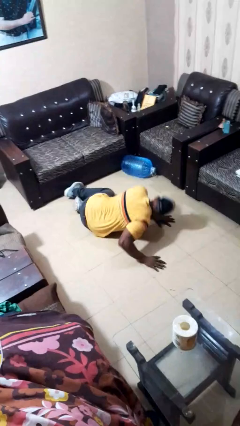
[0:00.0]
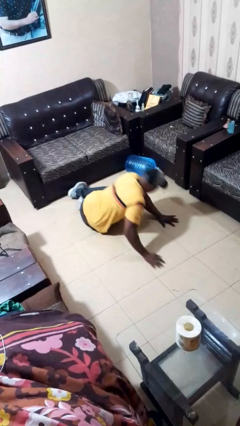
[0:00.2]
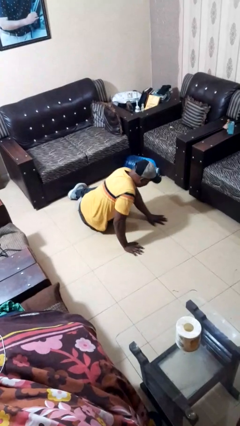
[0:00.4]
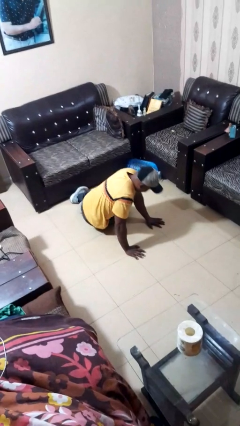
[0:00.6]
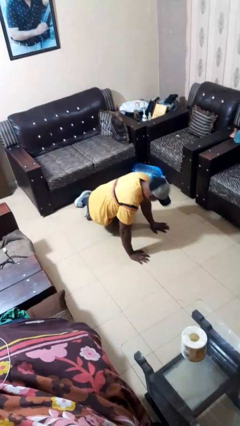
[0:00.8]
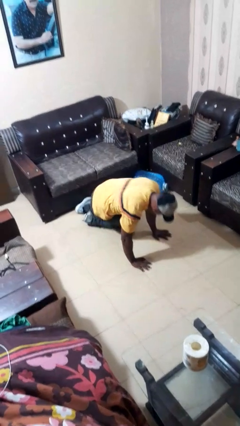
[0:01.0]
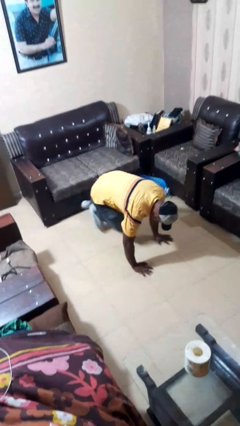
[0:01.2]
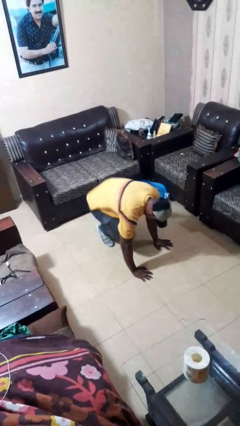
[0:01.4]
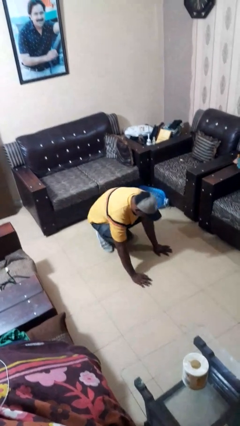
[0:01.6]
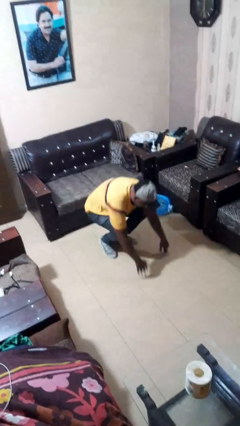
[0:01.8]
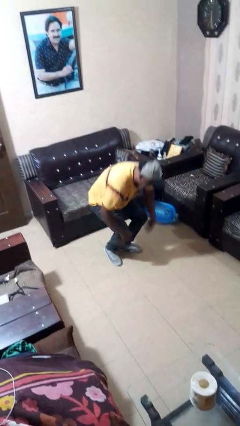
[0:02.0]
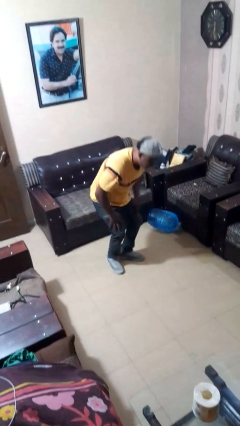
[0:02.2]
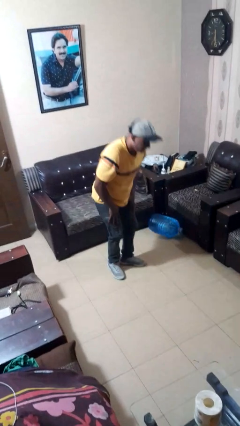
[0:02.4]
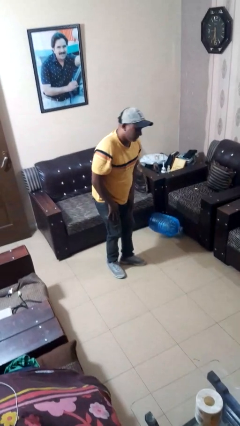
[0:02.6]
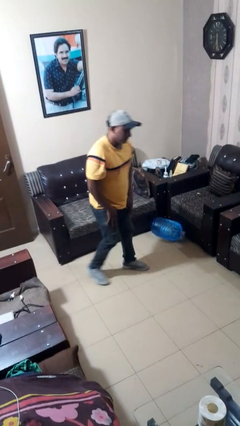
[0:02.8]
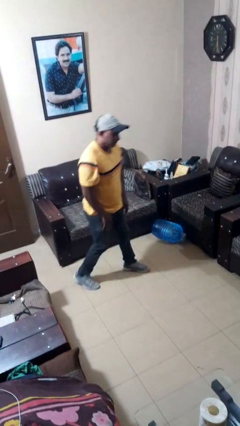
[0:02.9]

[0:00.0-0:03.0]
person stands up from floor

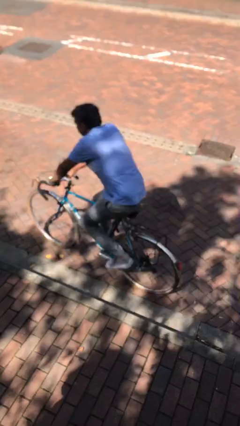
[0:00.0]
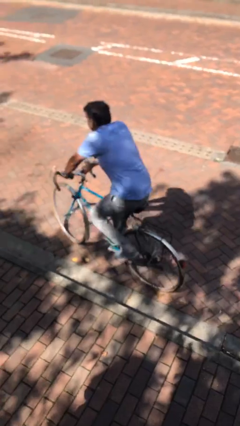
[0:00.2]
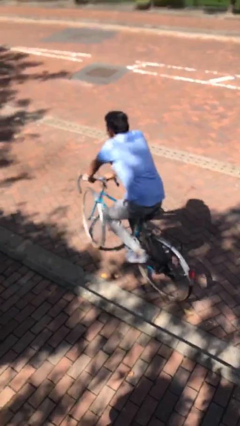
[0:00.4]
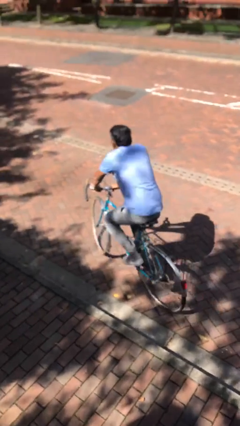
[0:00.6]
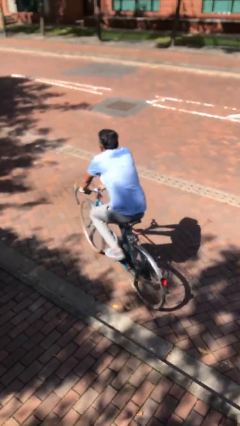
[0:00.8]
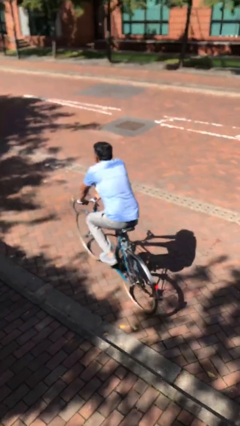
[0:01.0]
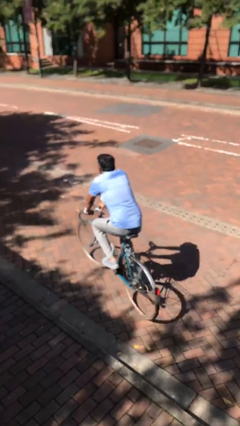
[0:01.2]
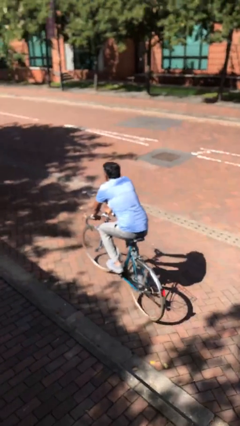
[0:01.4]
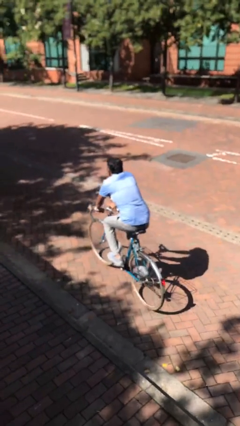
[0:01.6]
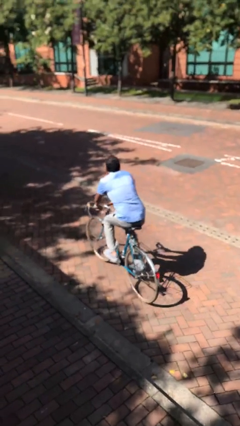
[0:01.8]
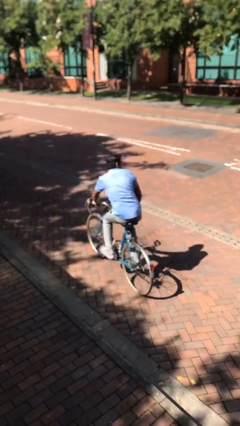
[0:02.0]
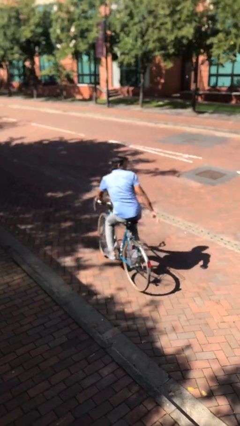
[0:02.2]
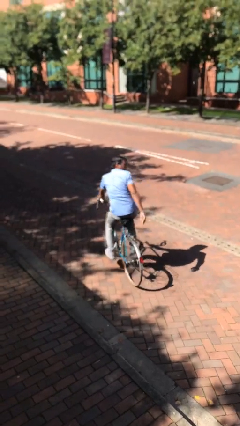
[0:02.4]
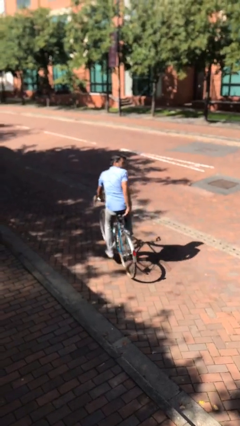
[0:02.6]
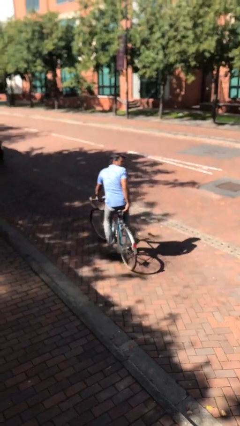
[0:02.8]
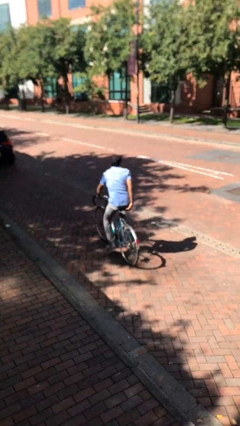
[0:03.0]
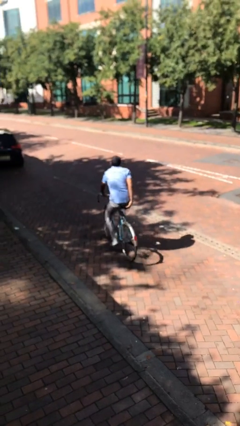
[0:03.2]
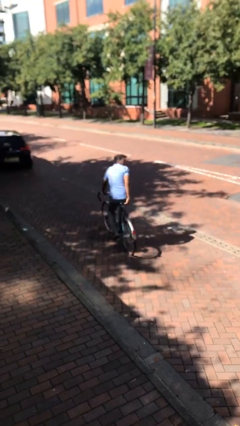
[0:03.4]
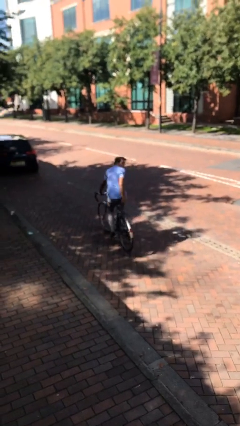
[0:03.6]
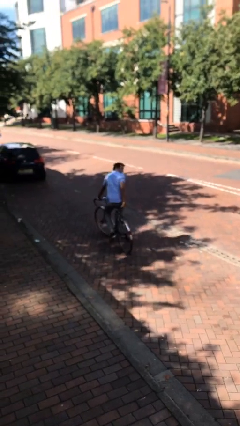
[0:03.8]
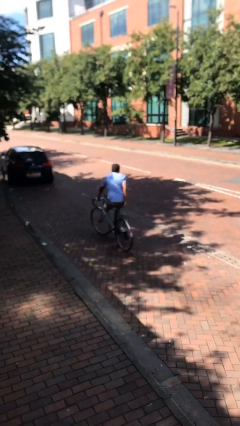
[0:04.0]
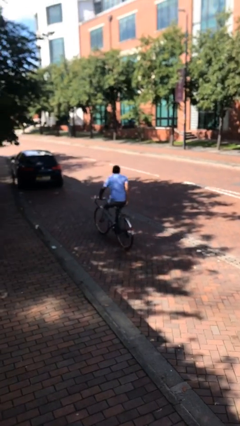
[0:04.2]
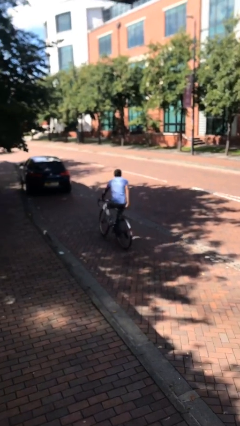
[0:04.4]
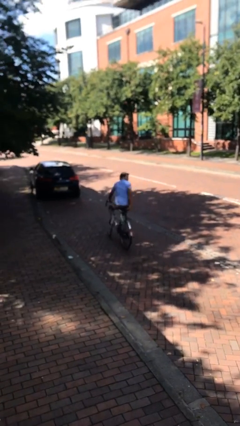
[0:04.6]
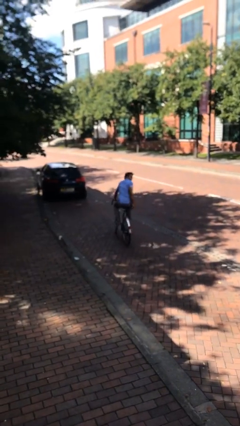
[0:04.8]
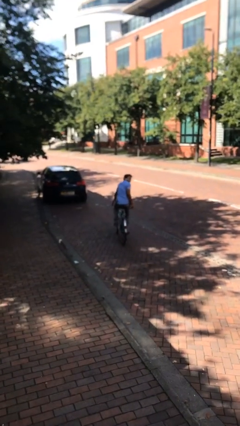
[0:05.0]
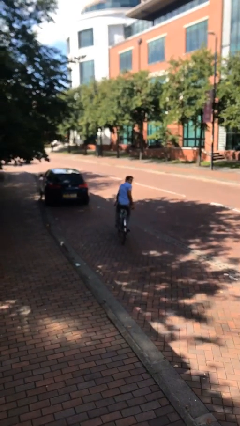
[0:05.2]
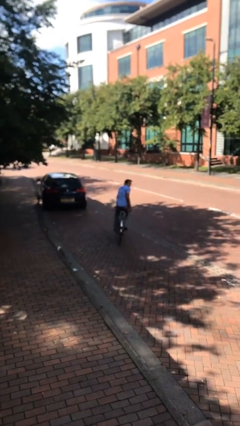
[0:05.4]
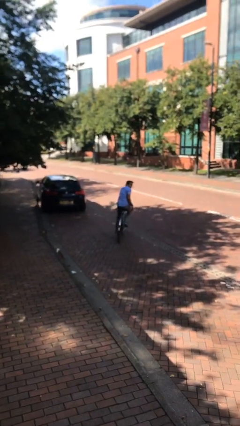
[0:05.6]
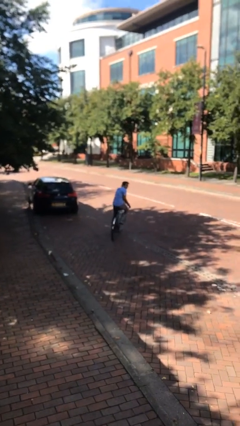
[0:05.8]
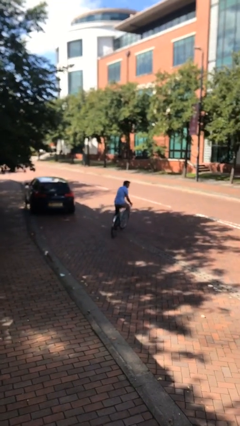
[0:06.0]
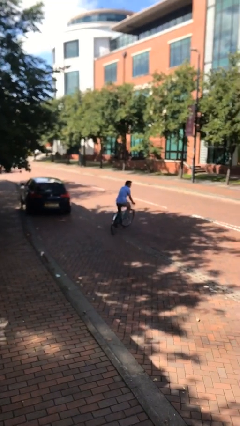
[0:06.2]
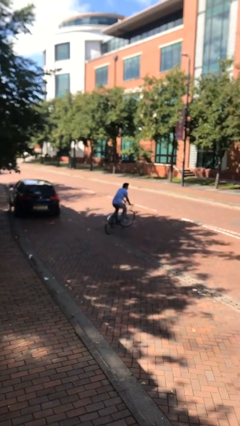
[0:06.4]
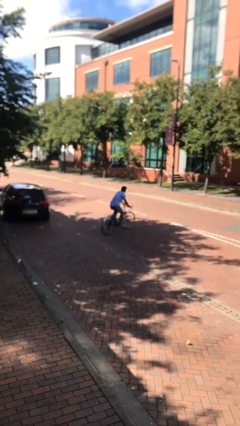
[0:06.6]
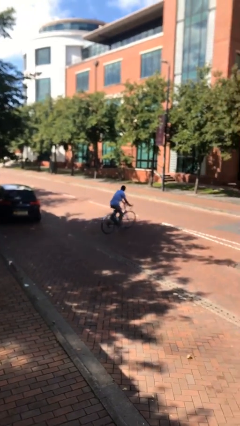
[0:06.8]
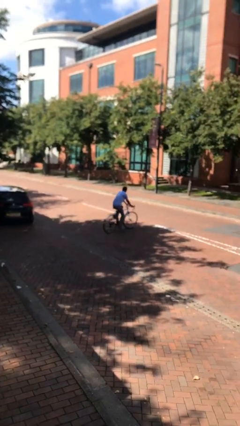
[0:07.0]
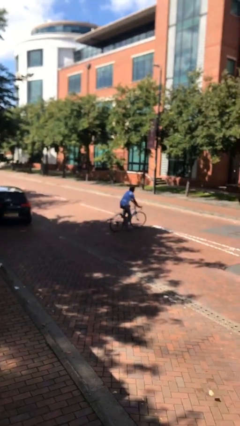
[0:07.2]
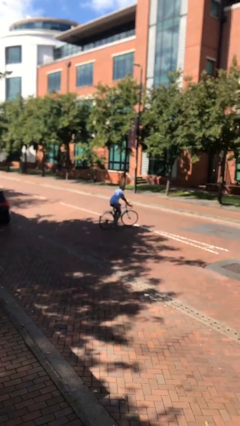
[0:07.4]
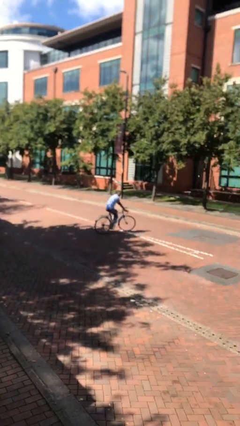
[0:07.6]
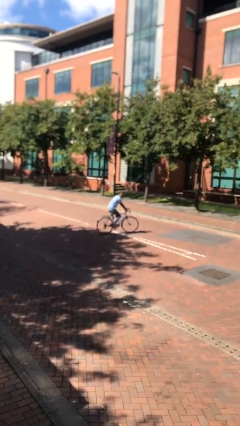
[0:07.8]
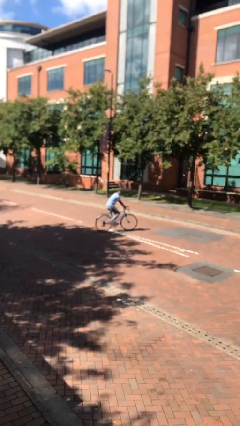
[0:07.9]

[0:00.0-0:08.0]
person rides bicycle

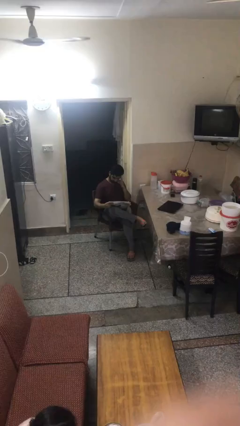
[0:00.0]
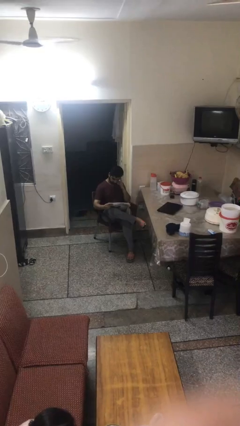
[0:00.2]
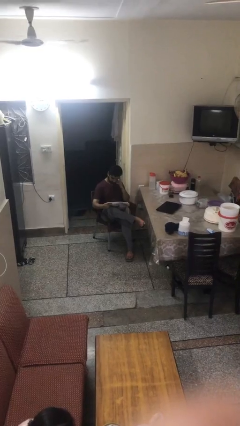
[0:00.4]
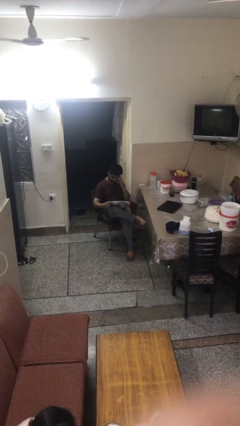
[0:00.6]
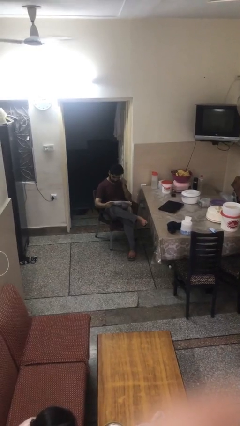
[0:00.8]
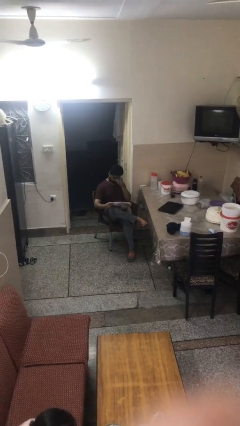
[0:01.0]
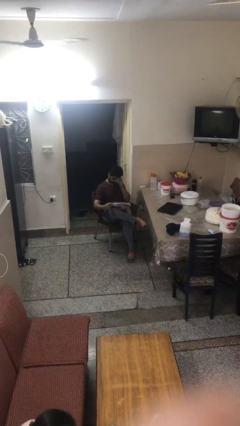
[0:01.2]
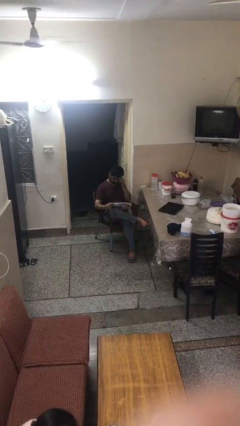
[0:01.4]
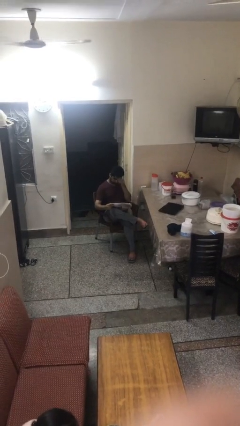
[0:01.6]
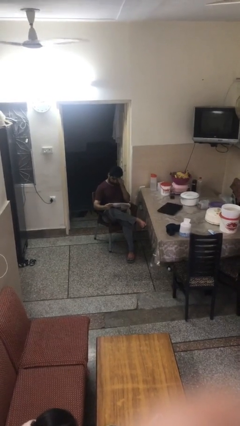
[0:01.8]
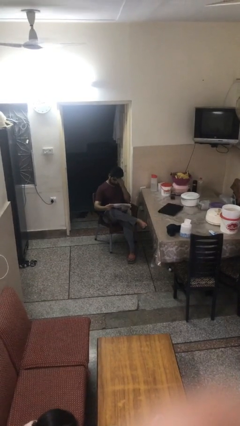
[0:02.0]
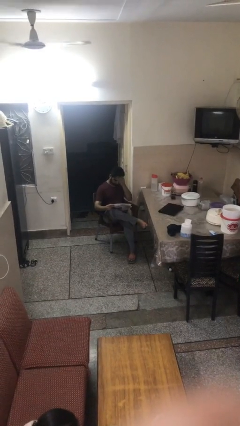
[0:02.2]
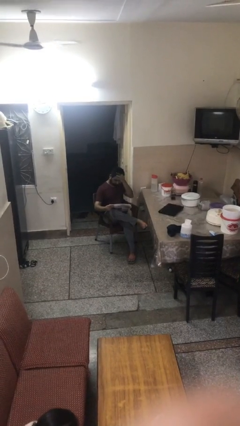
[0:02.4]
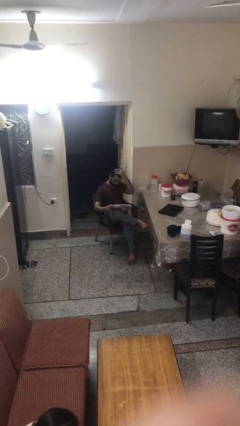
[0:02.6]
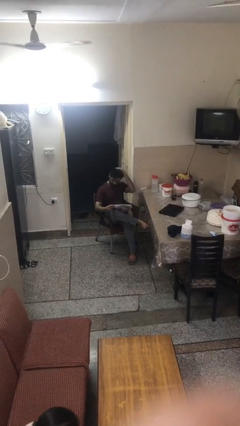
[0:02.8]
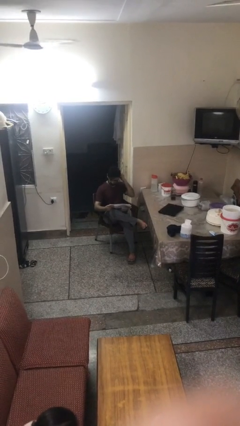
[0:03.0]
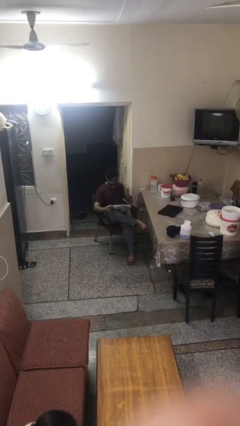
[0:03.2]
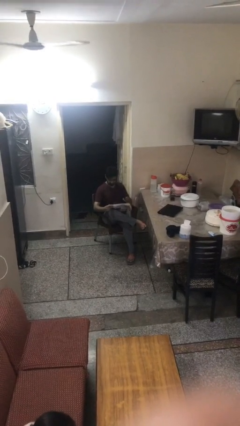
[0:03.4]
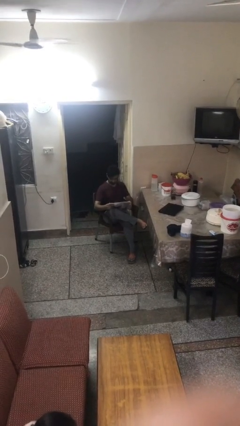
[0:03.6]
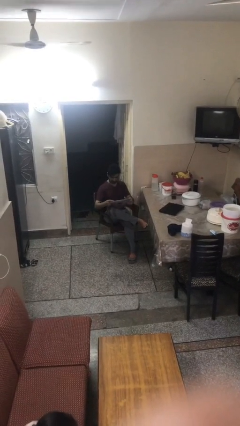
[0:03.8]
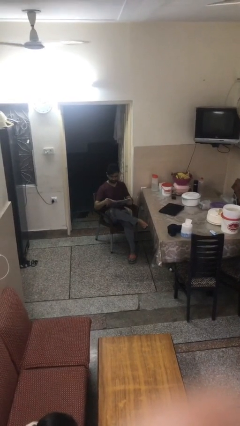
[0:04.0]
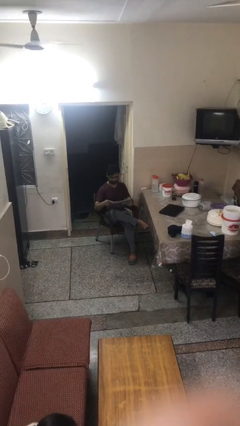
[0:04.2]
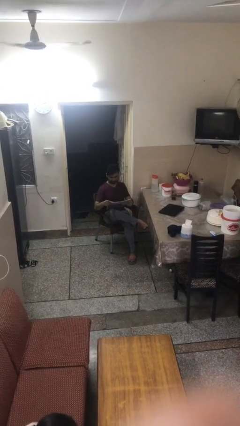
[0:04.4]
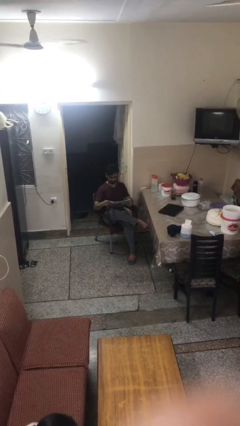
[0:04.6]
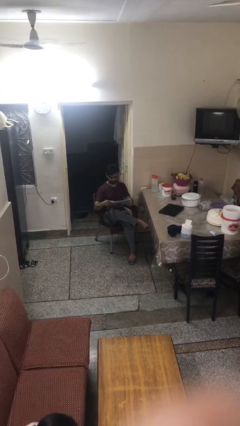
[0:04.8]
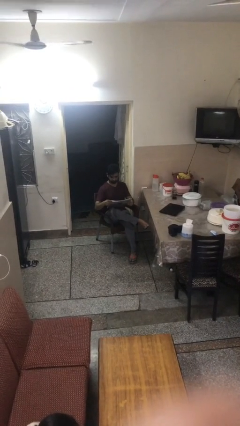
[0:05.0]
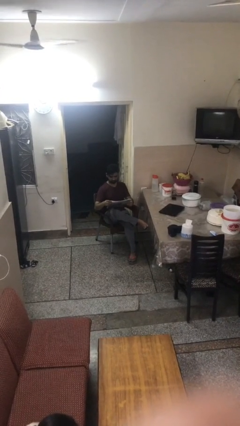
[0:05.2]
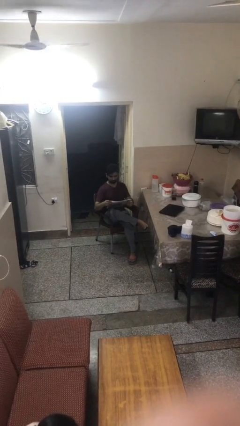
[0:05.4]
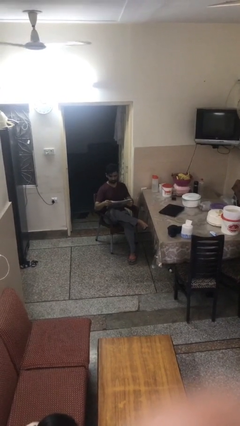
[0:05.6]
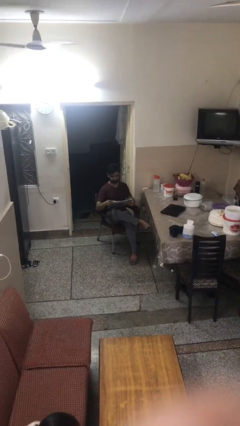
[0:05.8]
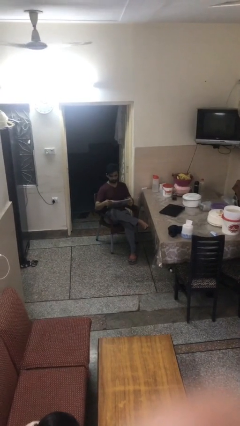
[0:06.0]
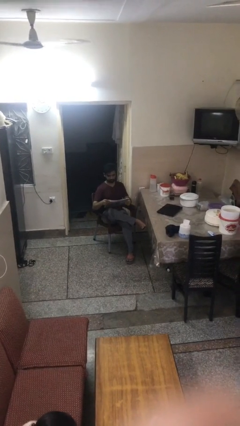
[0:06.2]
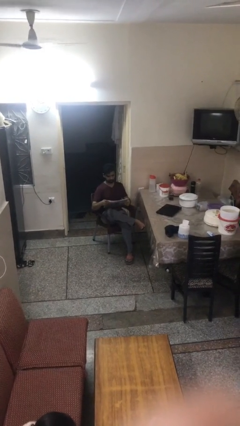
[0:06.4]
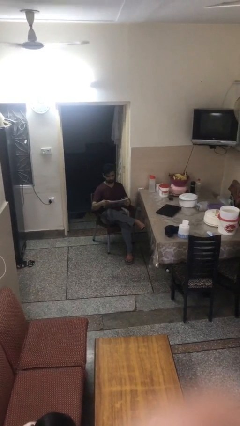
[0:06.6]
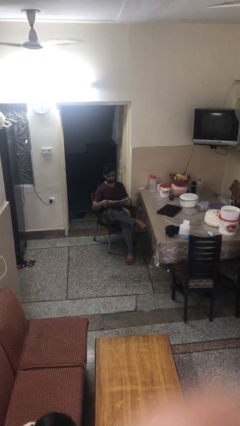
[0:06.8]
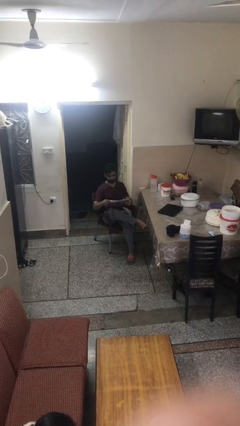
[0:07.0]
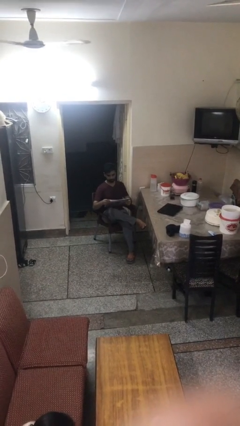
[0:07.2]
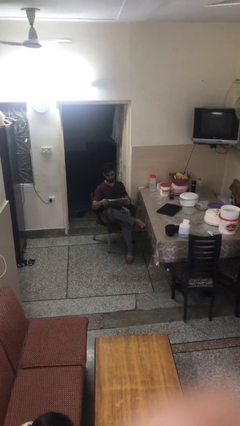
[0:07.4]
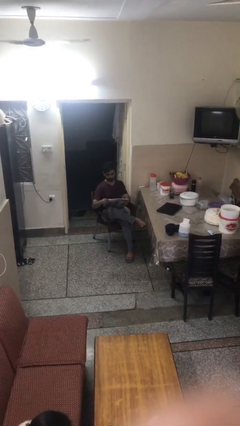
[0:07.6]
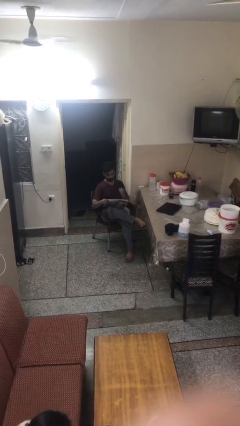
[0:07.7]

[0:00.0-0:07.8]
person reads document
